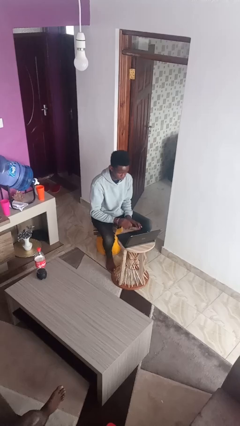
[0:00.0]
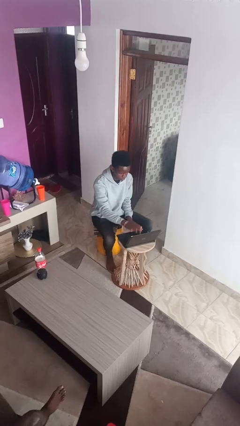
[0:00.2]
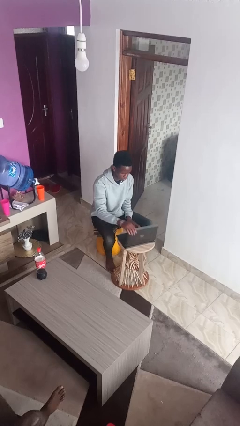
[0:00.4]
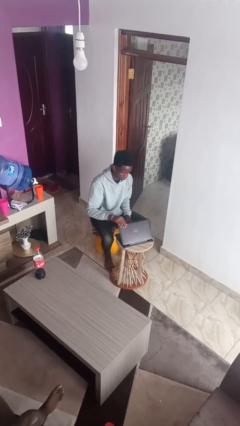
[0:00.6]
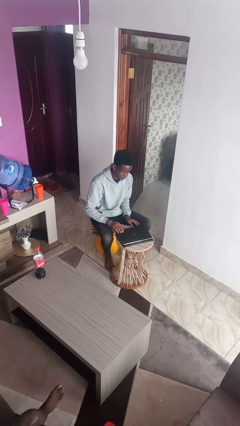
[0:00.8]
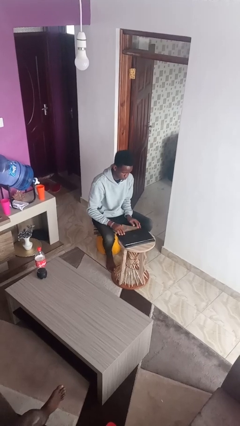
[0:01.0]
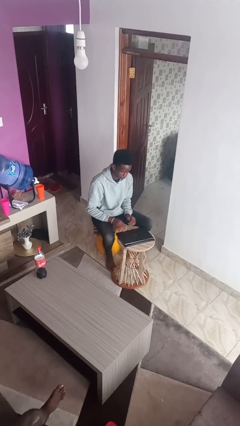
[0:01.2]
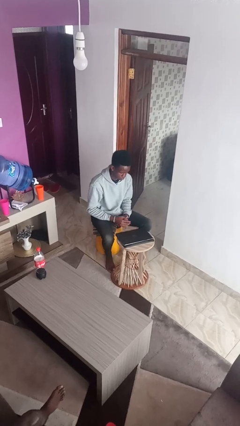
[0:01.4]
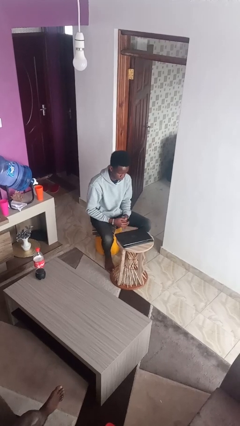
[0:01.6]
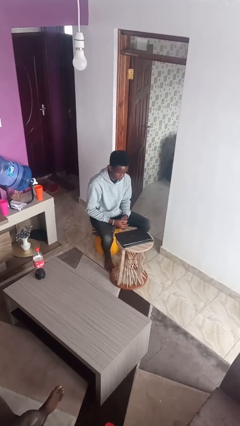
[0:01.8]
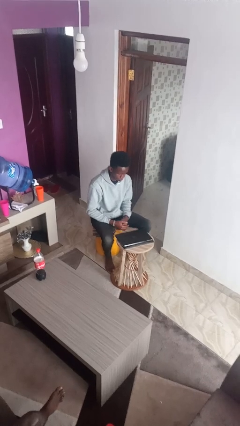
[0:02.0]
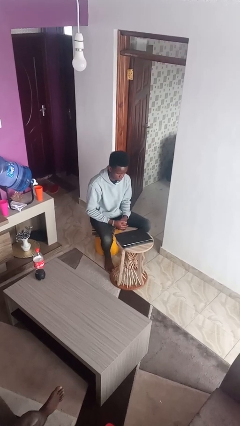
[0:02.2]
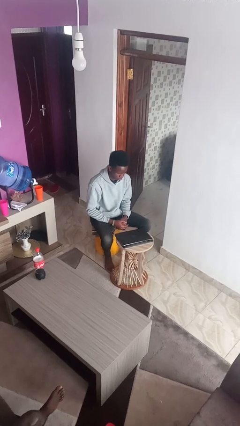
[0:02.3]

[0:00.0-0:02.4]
person closes laptop

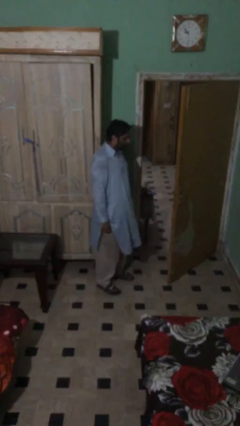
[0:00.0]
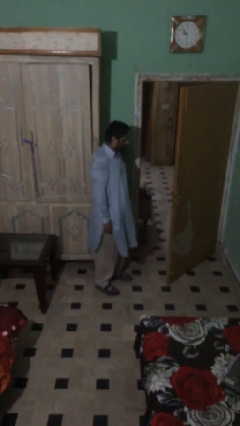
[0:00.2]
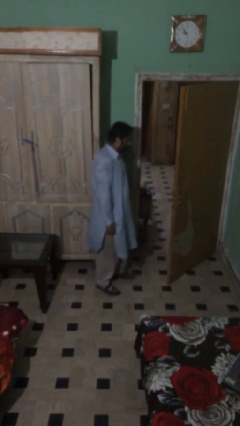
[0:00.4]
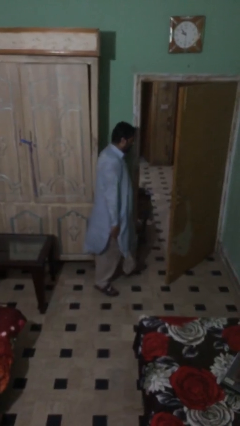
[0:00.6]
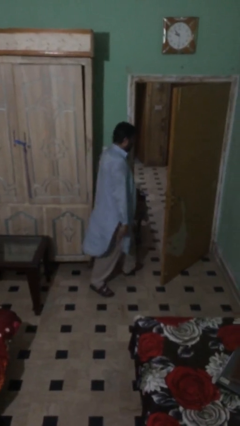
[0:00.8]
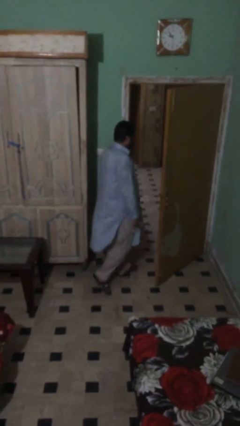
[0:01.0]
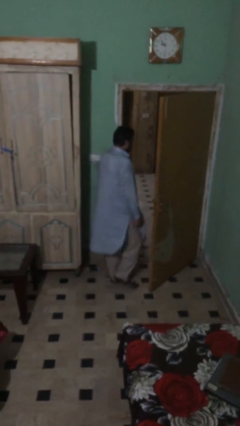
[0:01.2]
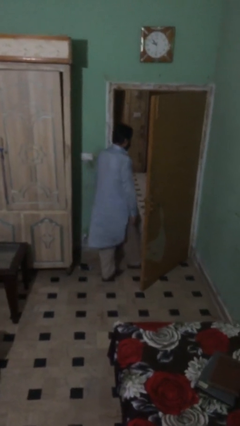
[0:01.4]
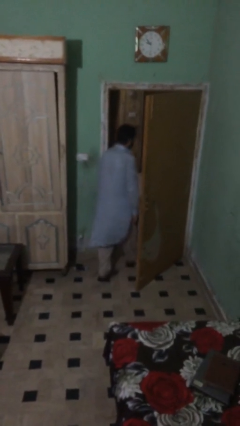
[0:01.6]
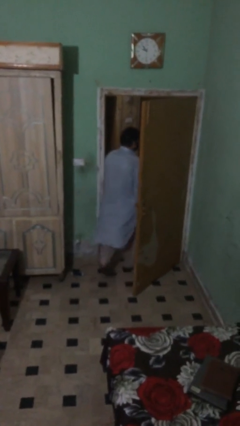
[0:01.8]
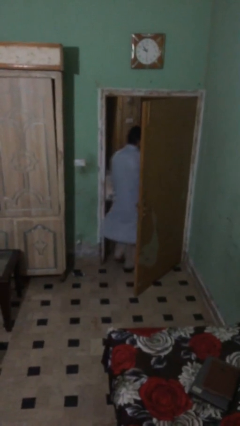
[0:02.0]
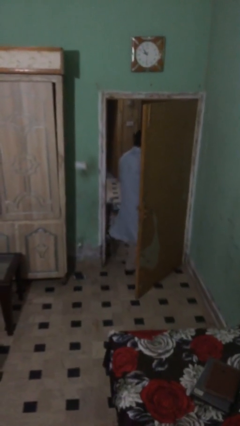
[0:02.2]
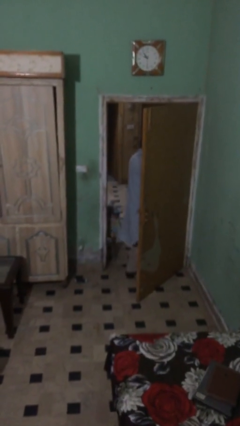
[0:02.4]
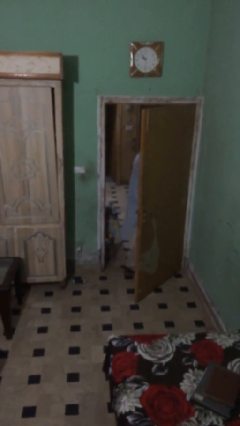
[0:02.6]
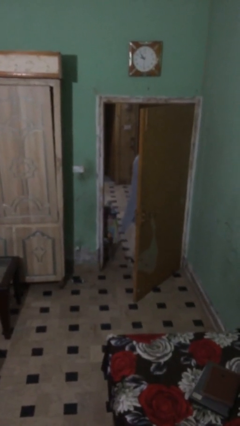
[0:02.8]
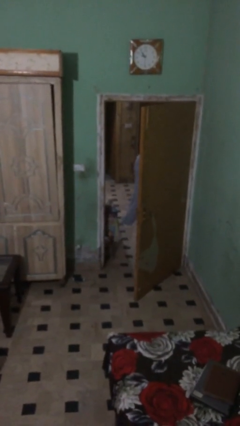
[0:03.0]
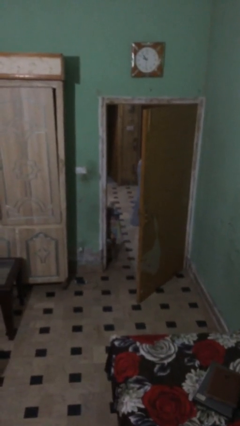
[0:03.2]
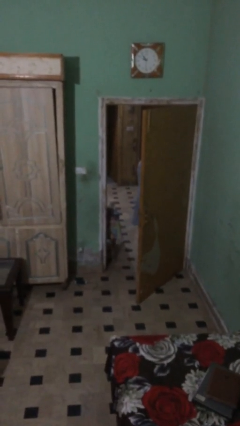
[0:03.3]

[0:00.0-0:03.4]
person exits scene through structure

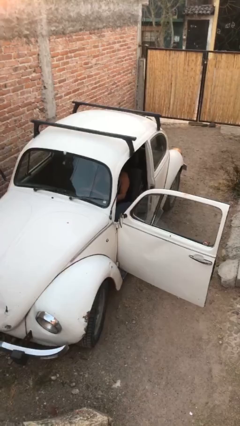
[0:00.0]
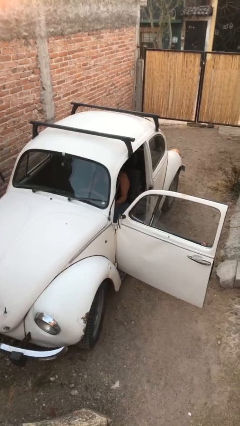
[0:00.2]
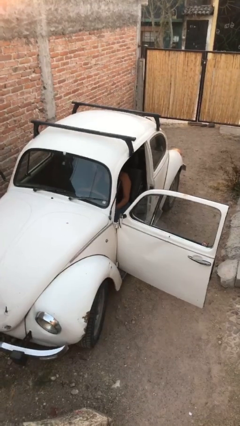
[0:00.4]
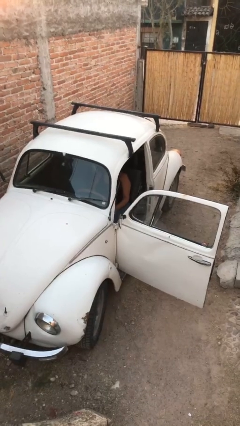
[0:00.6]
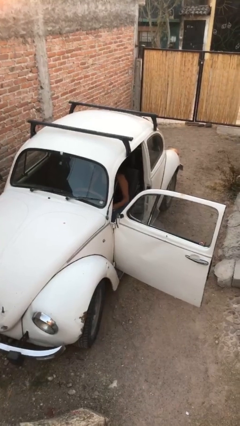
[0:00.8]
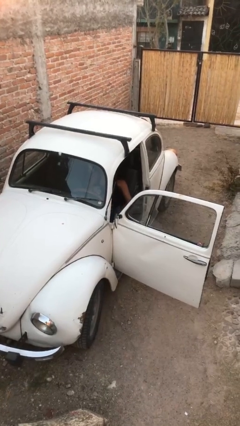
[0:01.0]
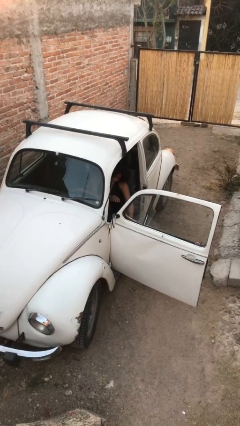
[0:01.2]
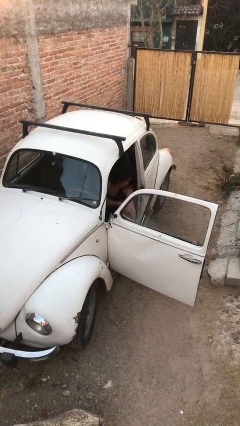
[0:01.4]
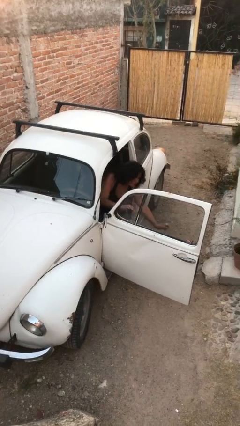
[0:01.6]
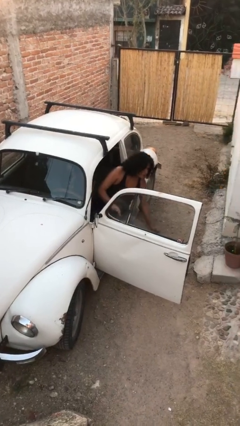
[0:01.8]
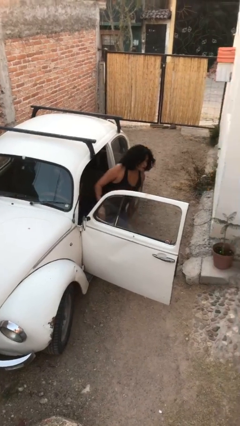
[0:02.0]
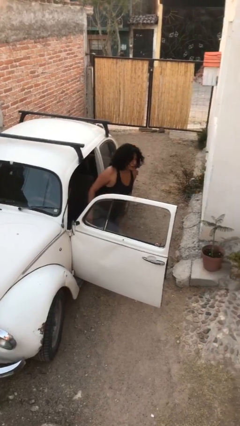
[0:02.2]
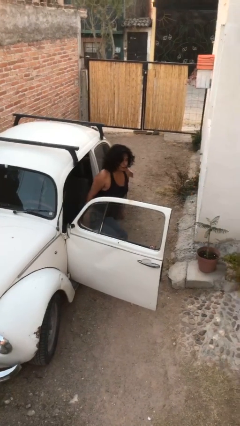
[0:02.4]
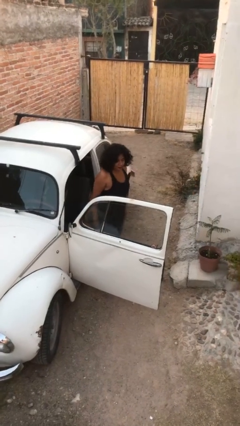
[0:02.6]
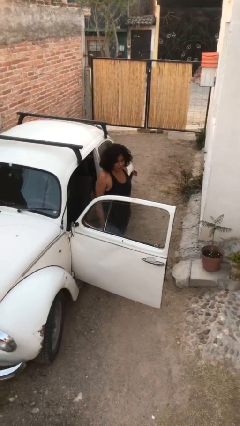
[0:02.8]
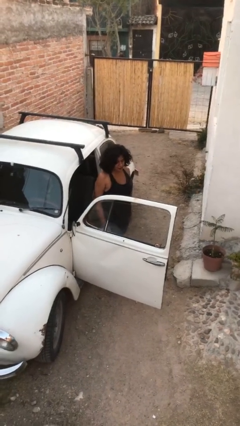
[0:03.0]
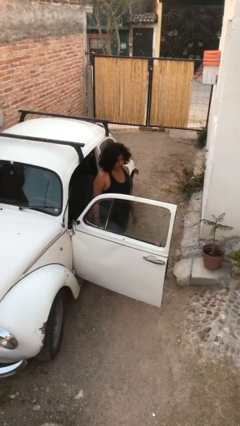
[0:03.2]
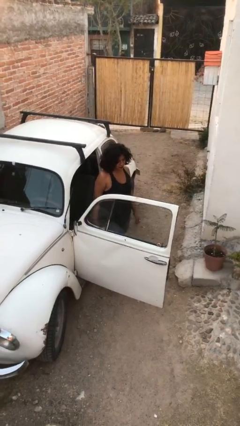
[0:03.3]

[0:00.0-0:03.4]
person exits car

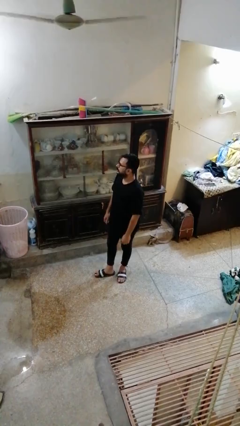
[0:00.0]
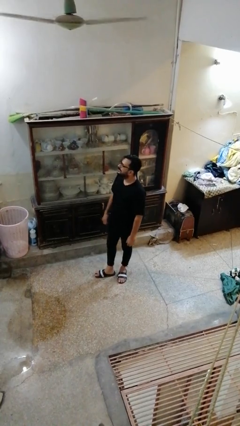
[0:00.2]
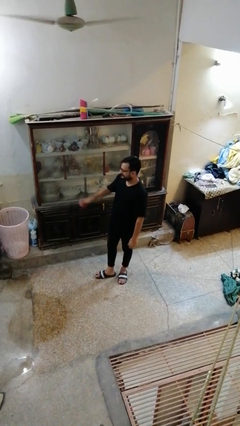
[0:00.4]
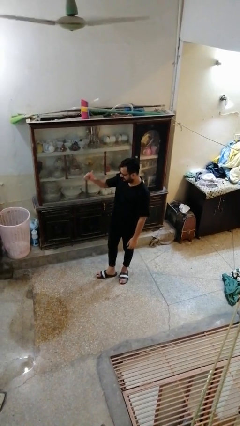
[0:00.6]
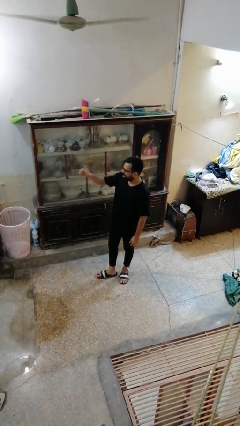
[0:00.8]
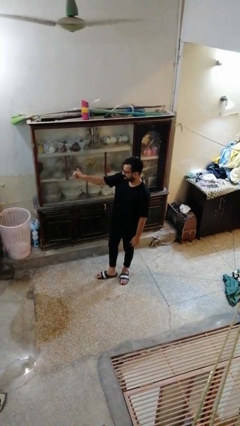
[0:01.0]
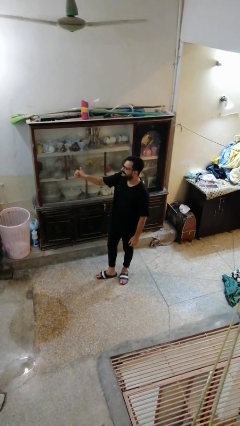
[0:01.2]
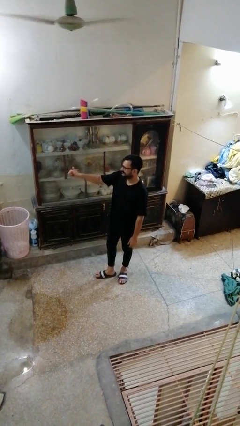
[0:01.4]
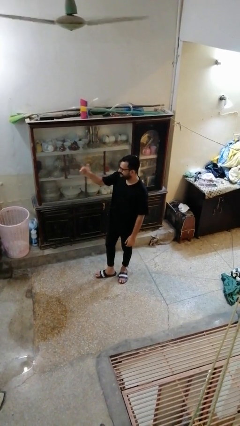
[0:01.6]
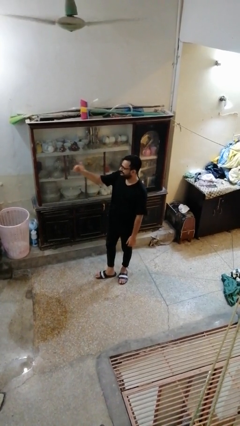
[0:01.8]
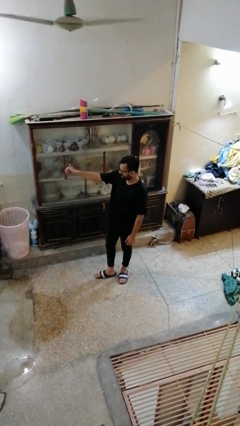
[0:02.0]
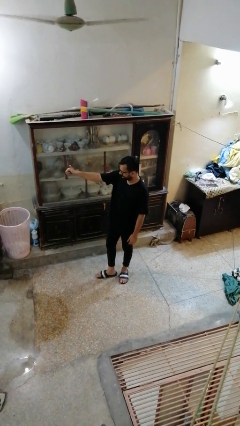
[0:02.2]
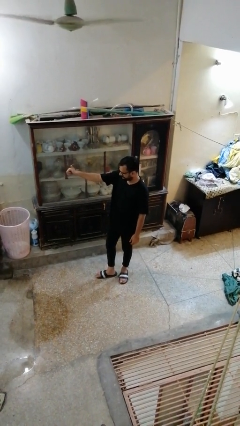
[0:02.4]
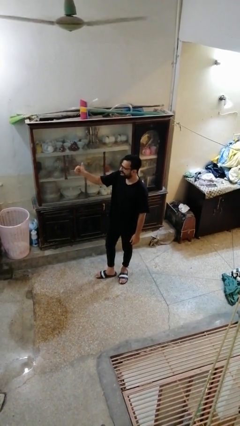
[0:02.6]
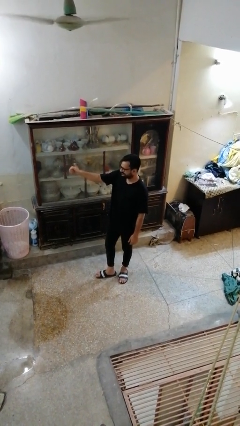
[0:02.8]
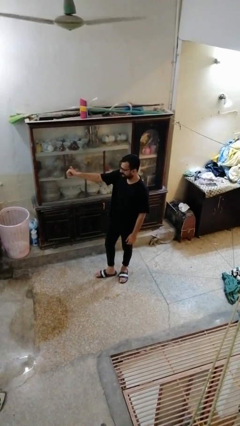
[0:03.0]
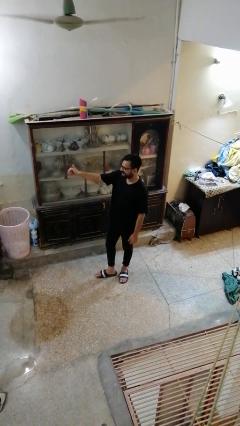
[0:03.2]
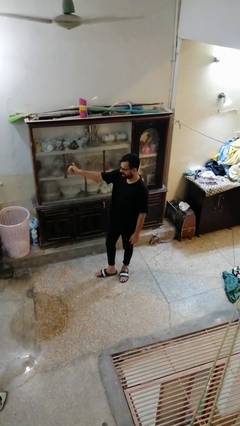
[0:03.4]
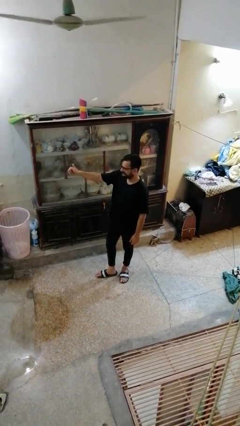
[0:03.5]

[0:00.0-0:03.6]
person gestures thumbs up

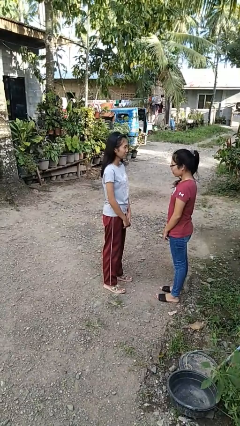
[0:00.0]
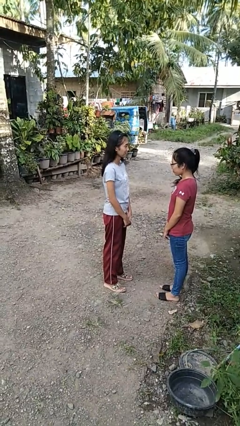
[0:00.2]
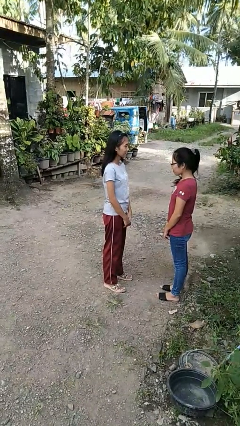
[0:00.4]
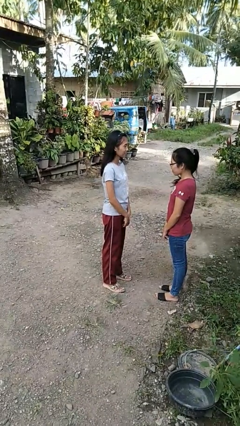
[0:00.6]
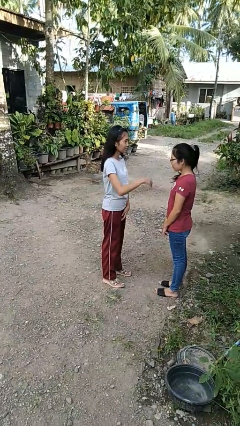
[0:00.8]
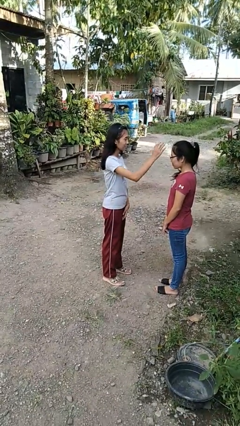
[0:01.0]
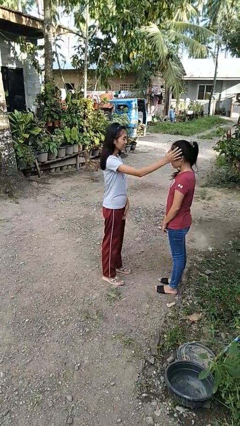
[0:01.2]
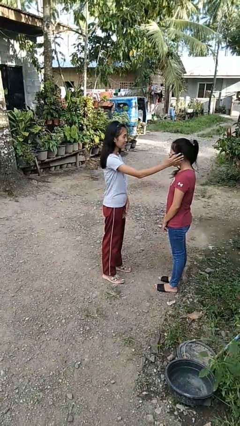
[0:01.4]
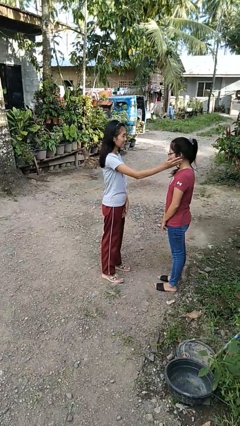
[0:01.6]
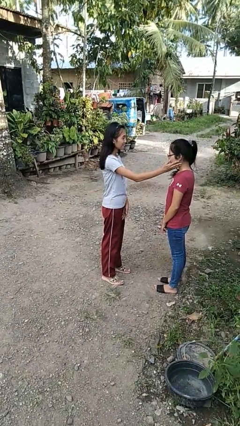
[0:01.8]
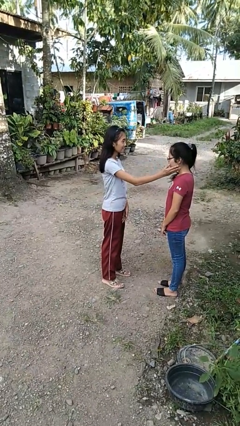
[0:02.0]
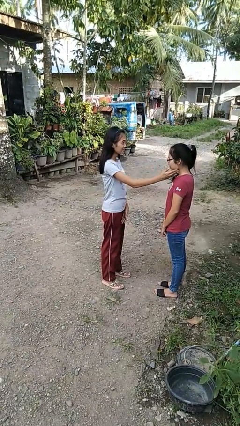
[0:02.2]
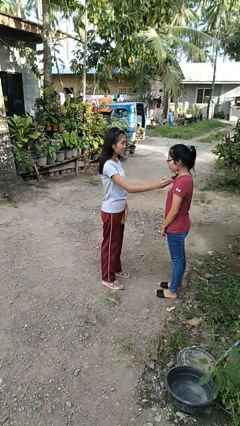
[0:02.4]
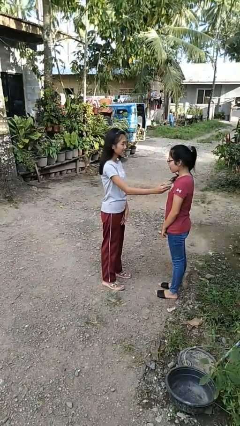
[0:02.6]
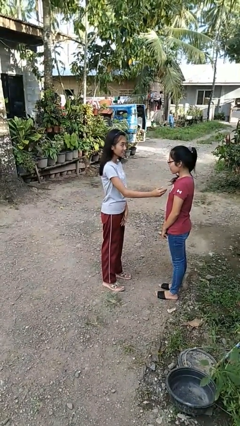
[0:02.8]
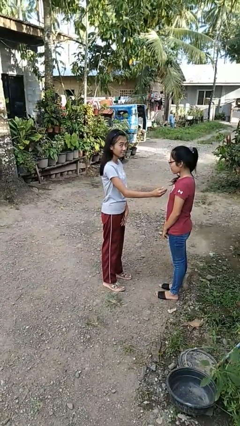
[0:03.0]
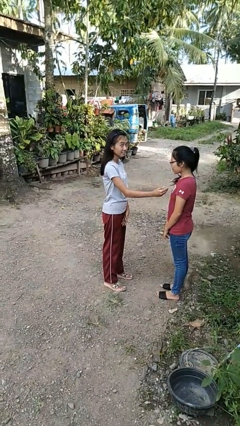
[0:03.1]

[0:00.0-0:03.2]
person touches face of person

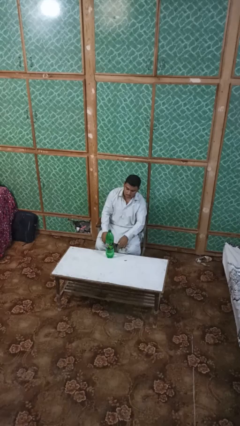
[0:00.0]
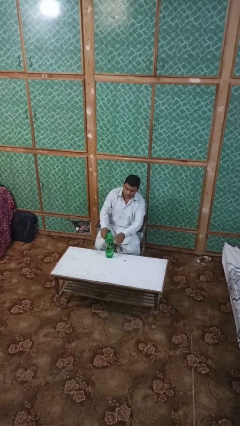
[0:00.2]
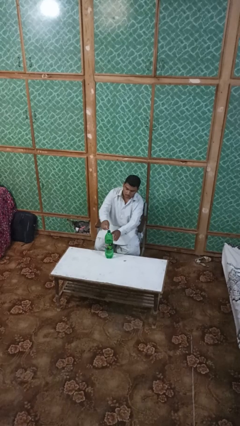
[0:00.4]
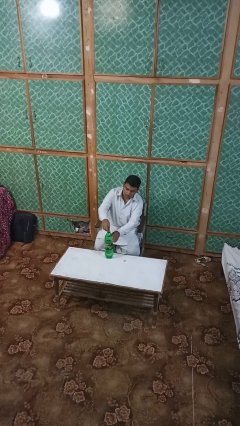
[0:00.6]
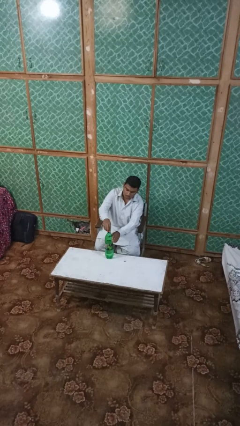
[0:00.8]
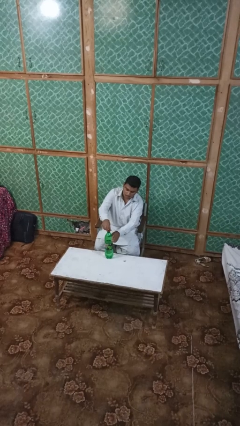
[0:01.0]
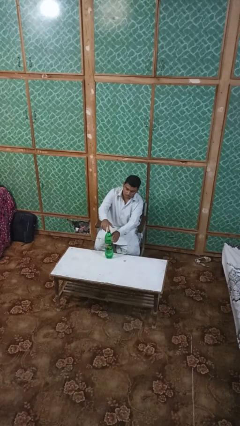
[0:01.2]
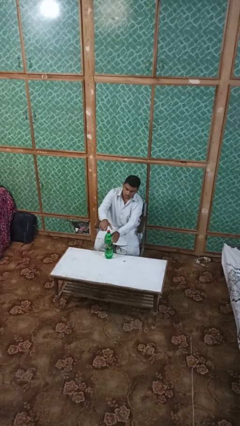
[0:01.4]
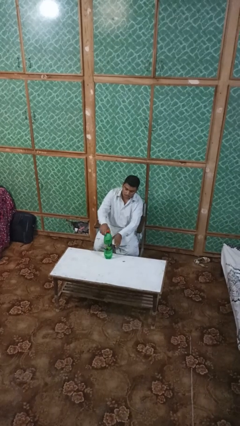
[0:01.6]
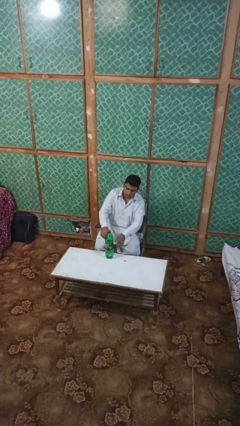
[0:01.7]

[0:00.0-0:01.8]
person screws lid to bottle
